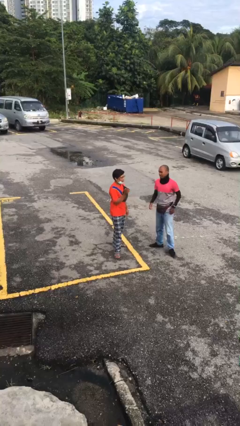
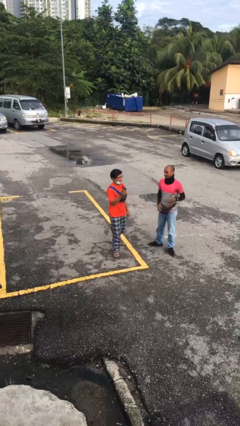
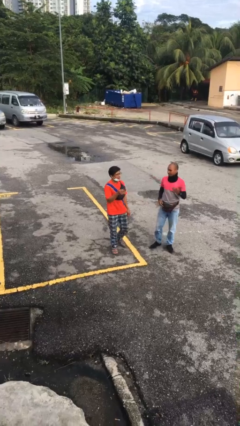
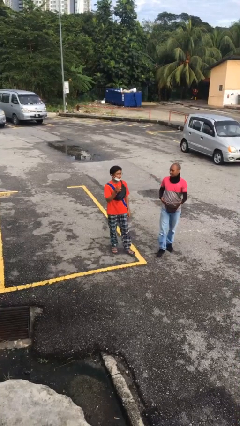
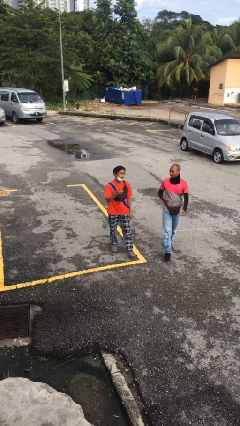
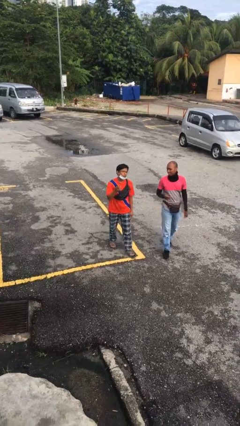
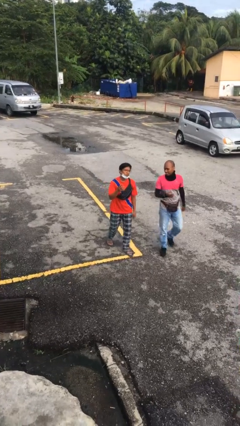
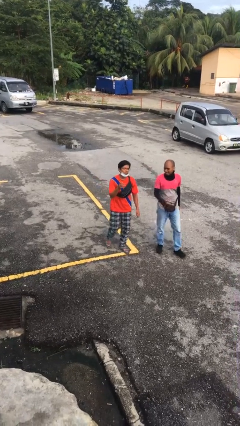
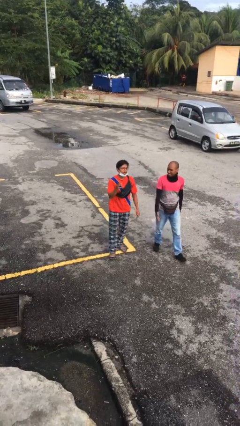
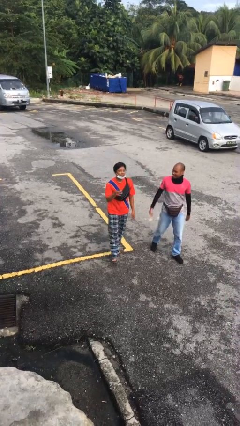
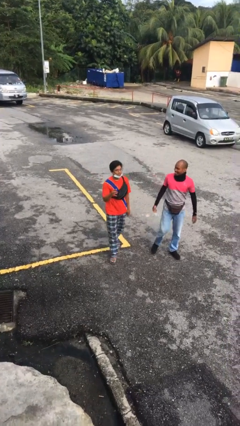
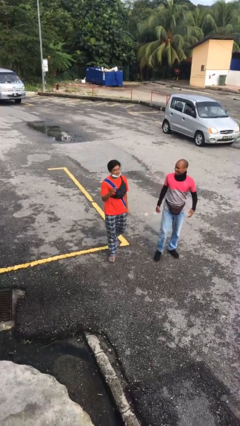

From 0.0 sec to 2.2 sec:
person talks to person

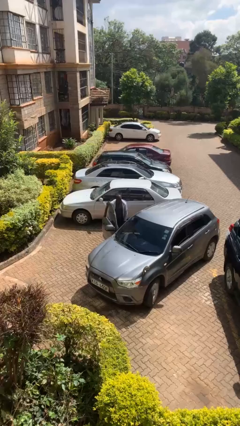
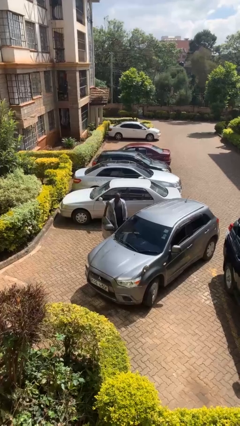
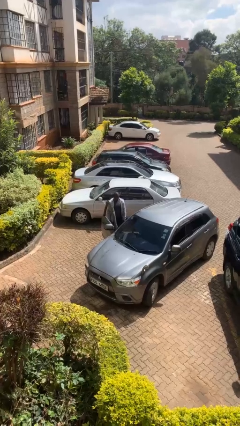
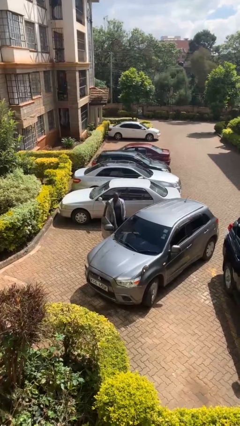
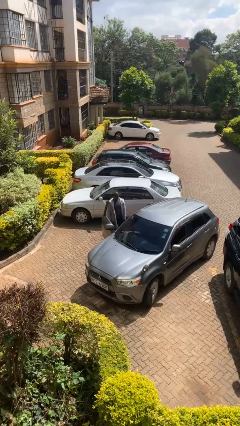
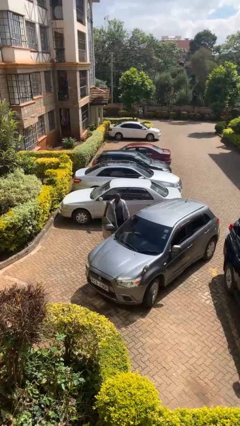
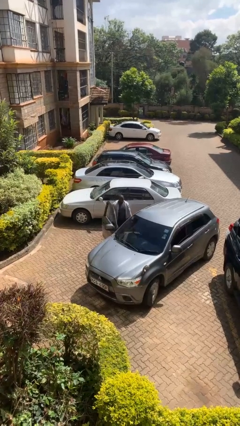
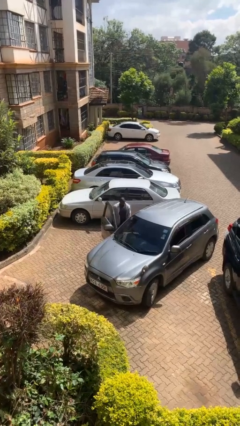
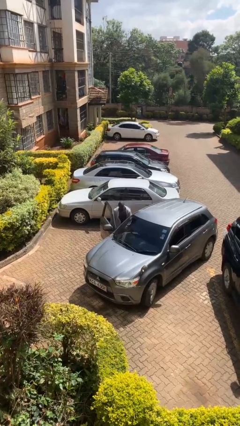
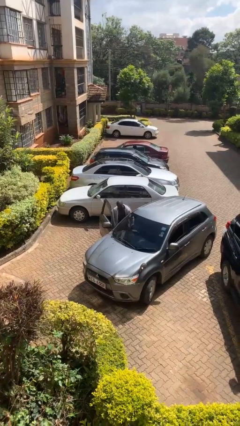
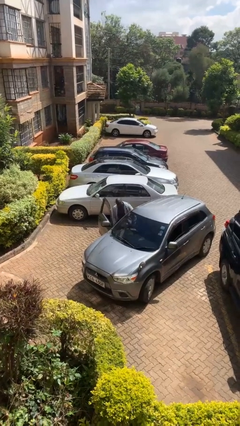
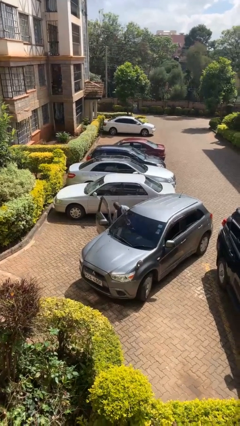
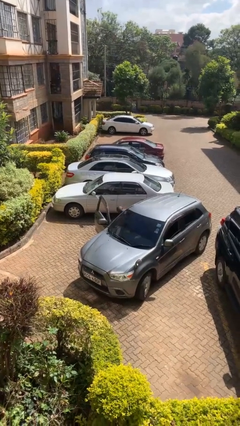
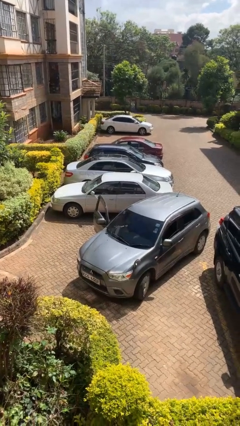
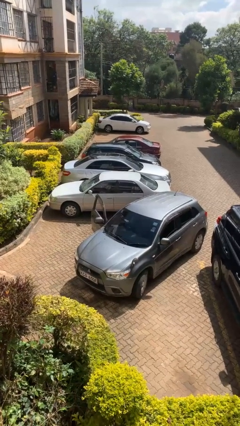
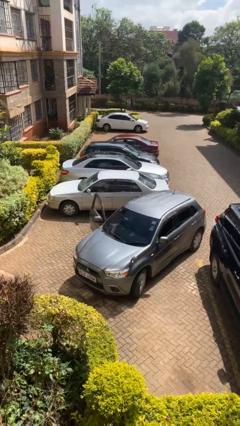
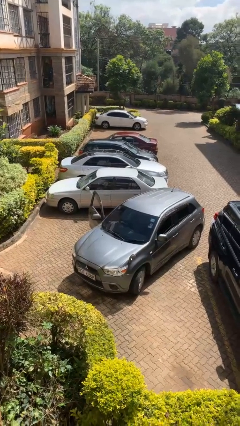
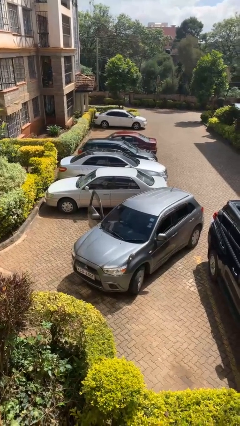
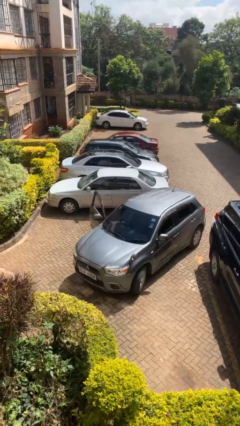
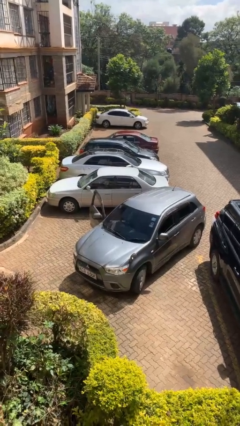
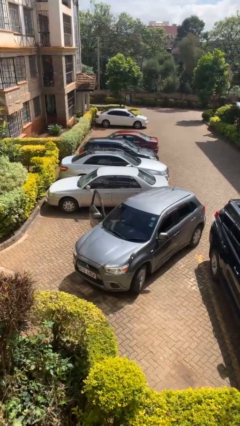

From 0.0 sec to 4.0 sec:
person enters car

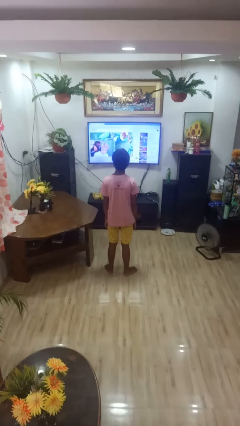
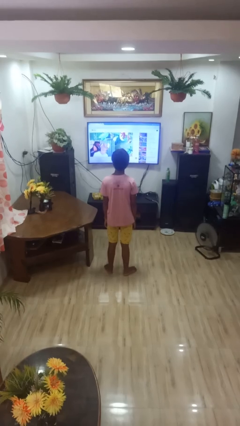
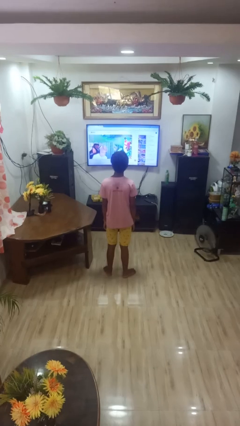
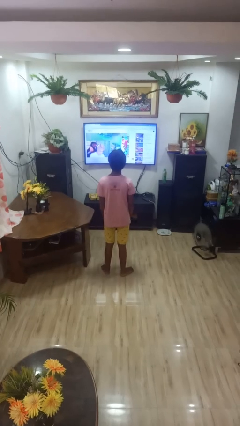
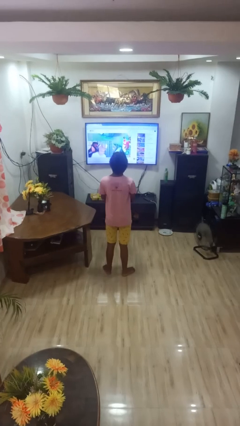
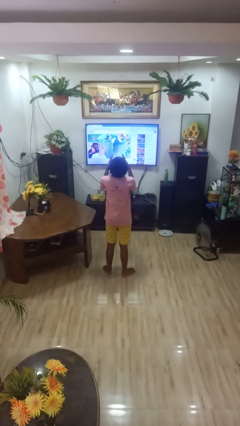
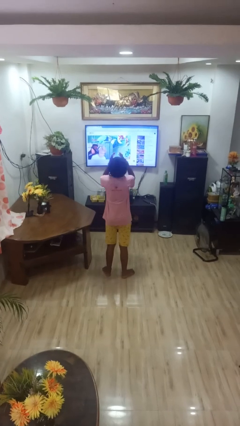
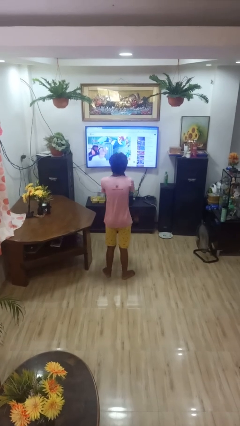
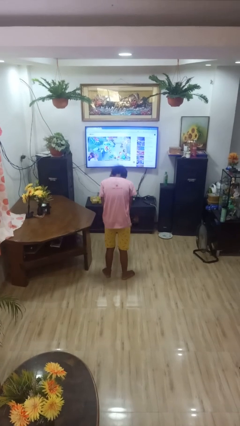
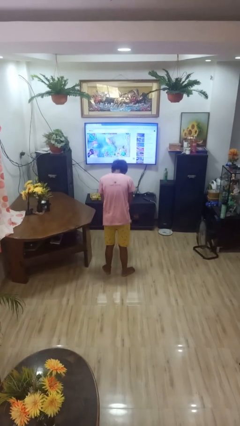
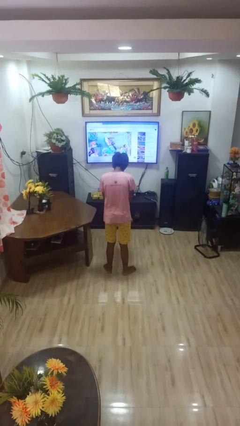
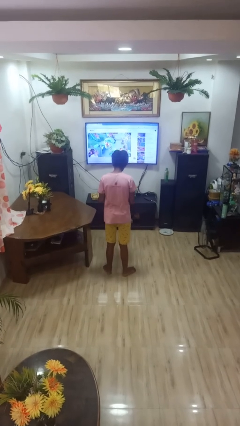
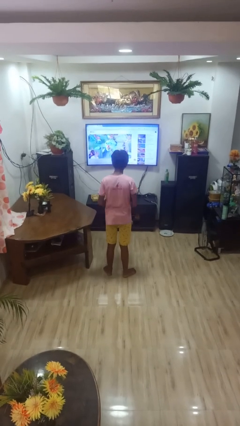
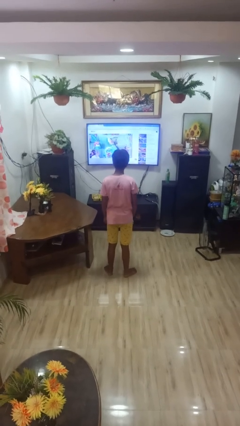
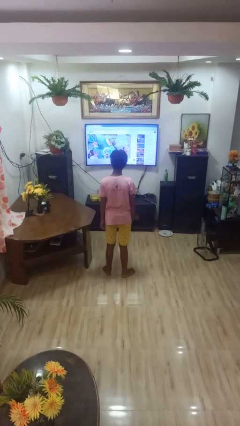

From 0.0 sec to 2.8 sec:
person sneezes into hand

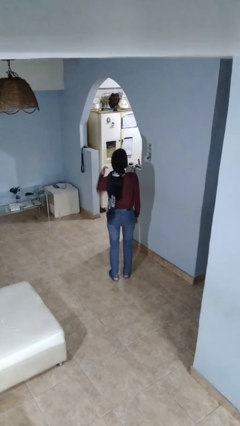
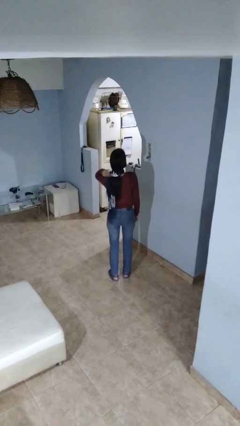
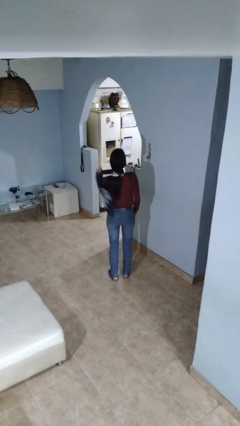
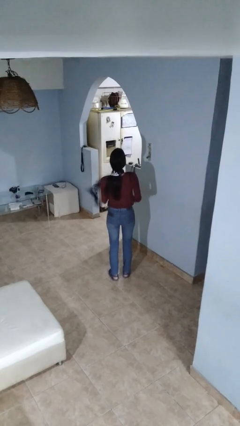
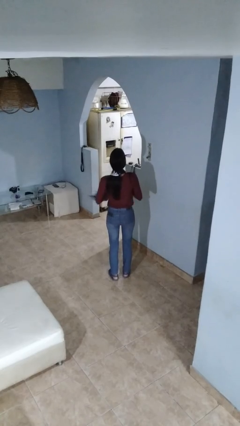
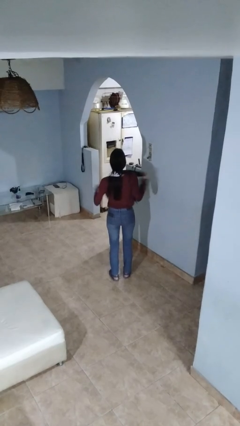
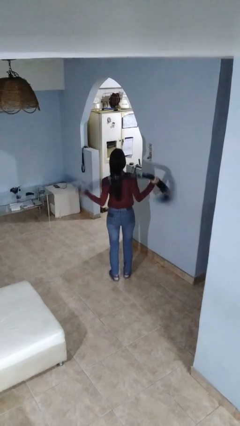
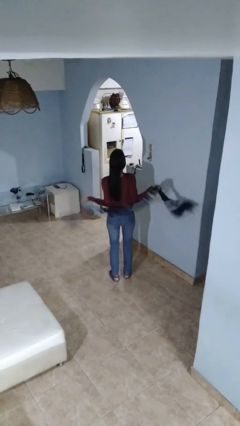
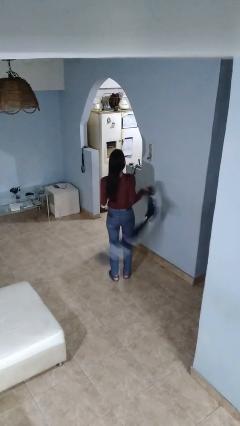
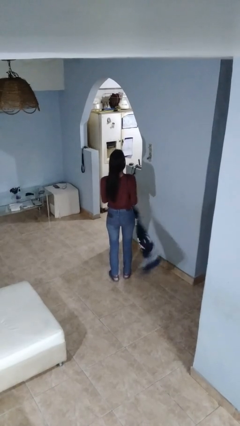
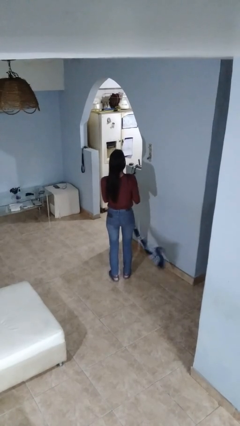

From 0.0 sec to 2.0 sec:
person takes off scarf

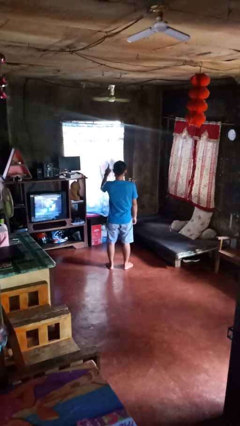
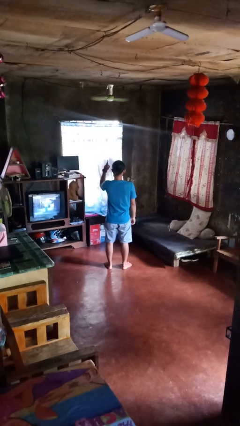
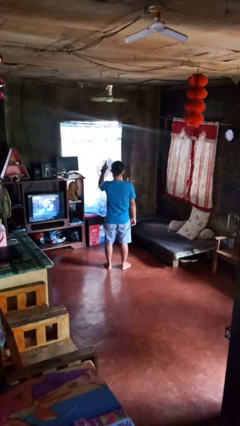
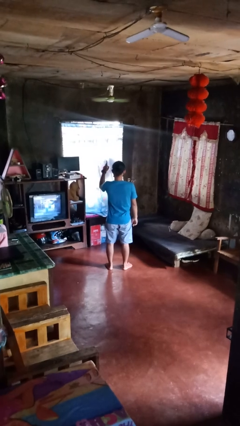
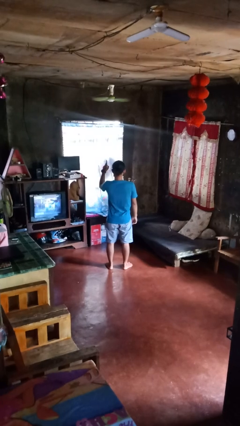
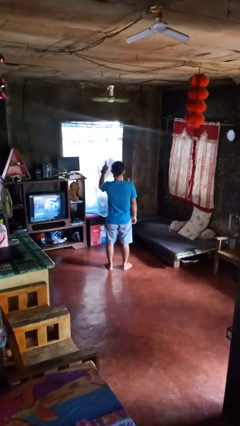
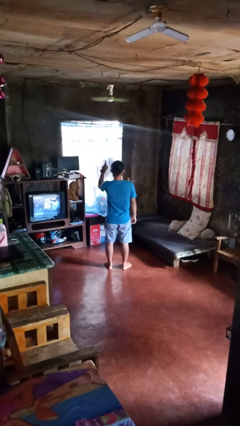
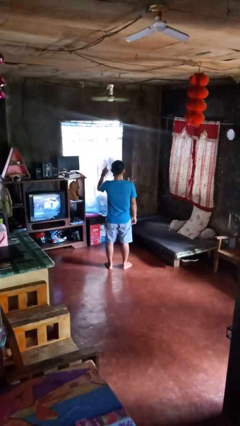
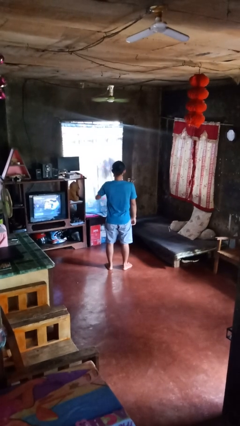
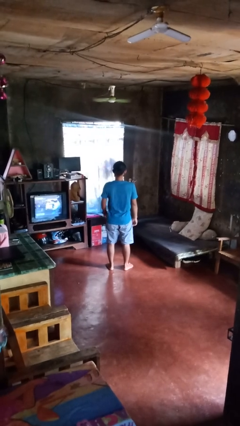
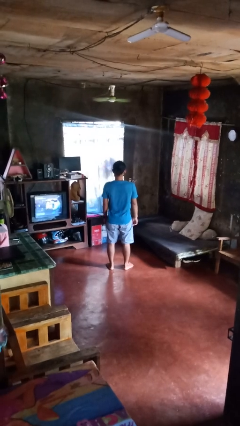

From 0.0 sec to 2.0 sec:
person gestures number one

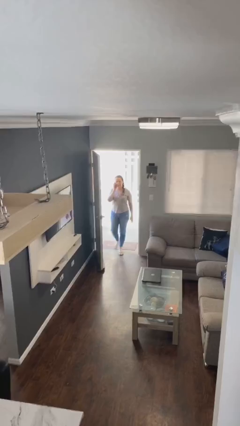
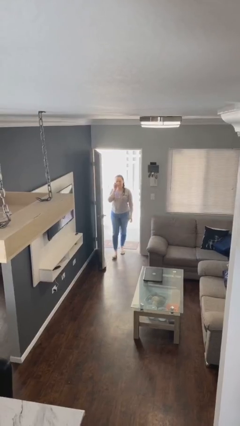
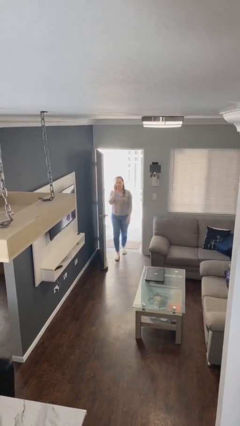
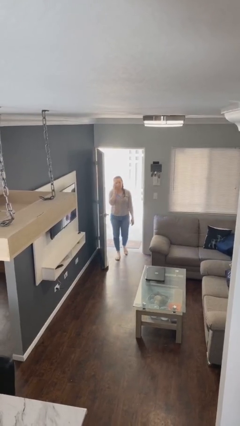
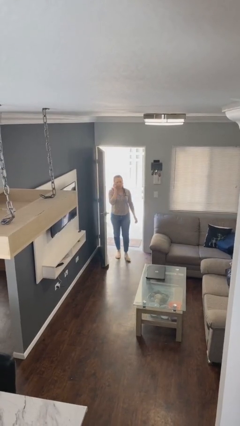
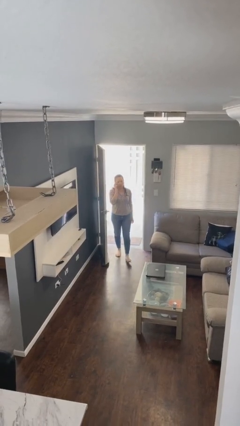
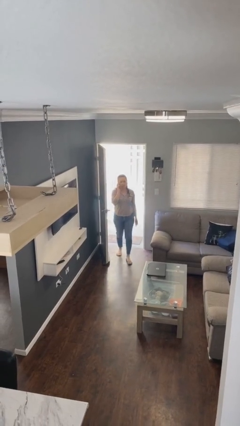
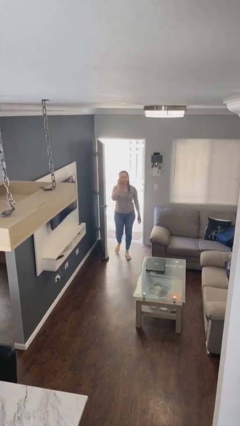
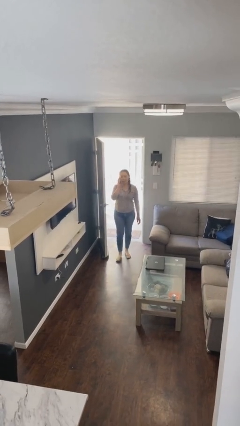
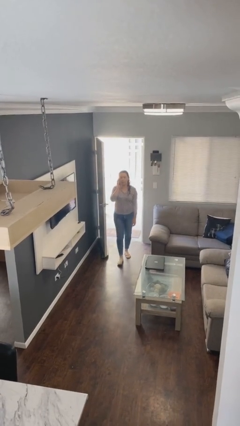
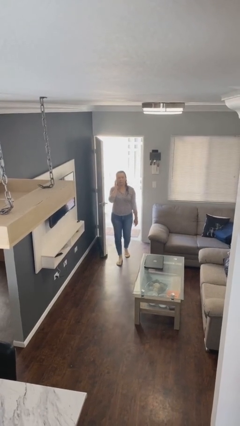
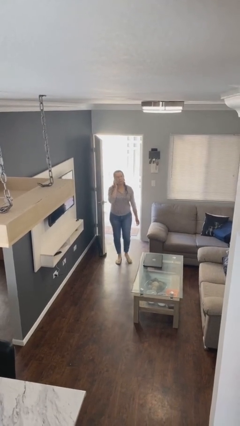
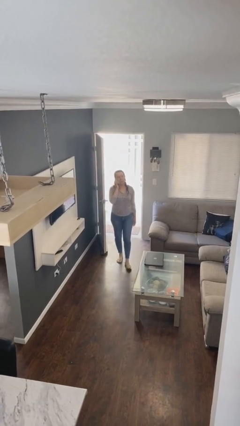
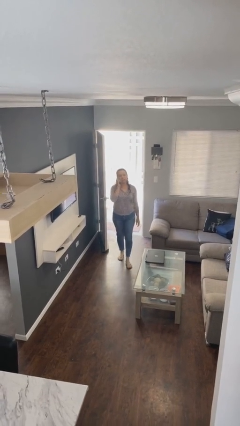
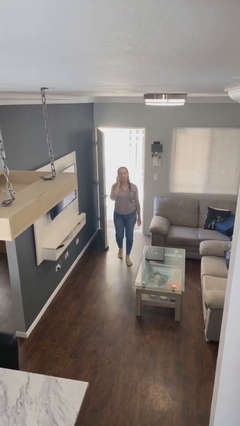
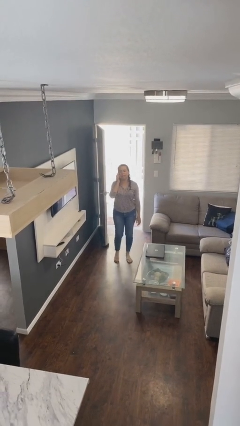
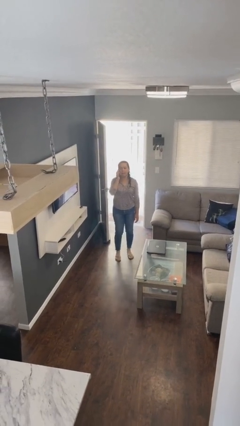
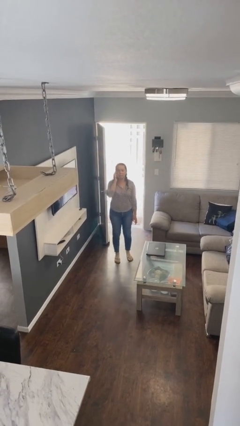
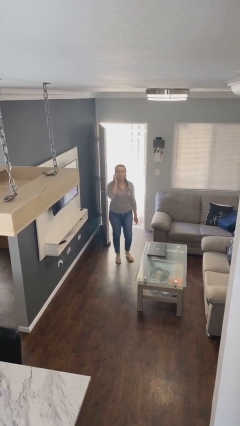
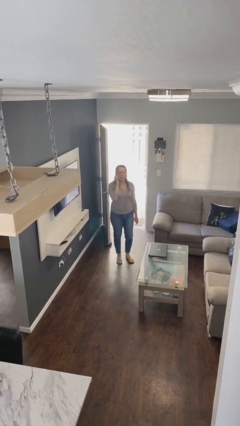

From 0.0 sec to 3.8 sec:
person enters scene through structure

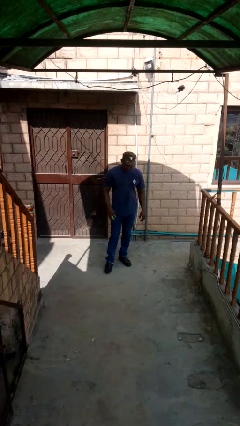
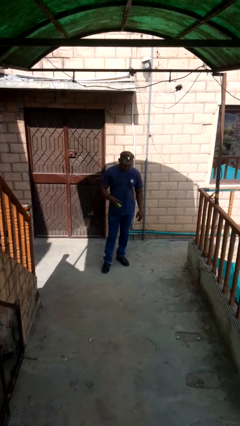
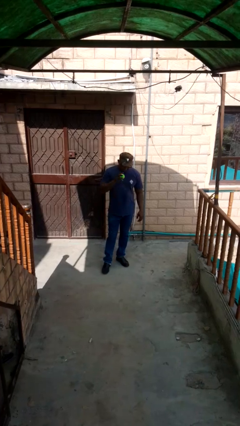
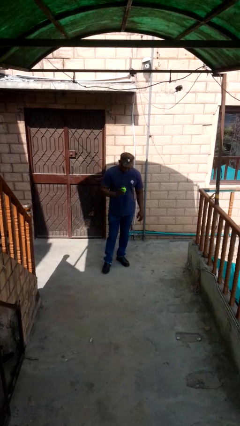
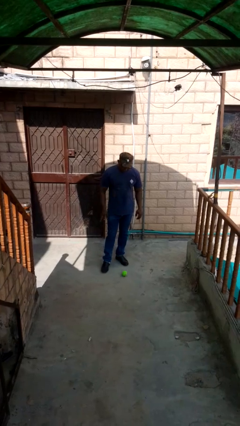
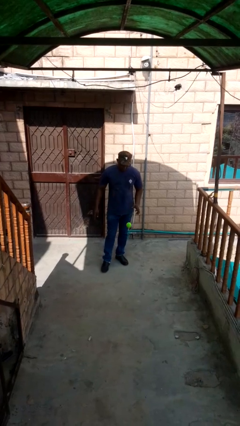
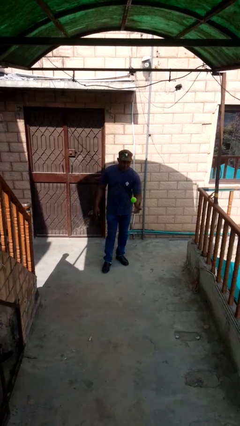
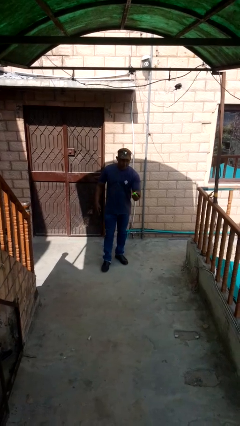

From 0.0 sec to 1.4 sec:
person bounces ball on floor
